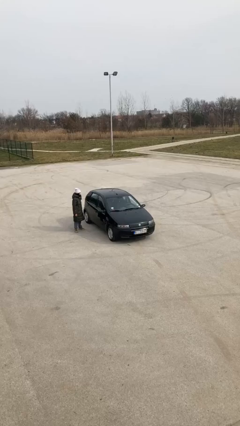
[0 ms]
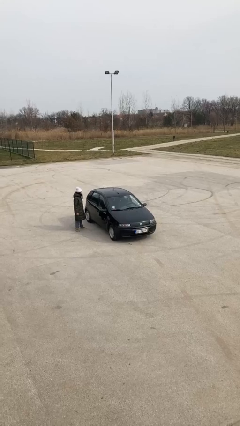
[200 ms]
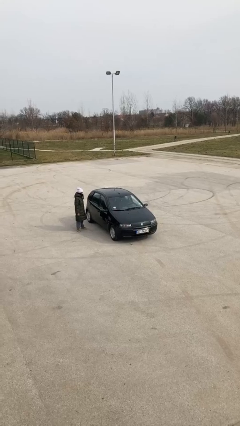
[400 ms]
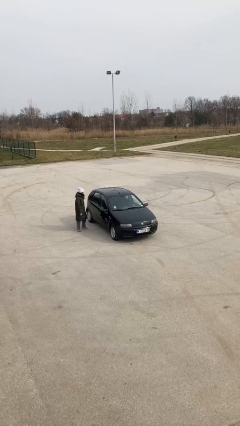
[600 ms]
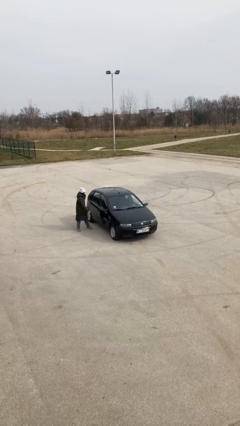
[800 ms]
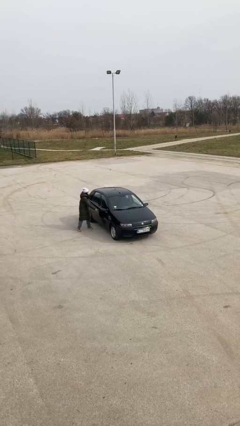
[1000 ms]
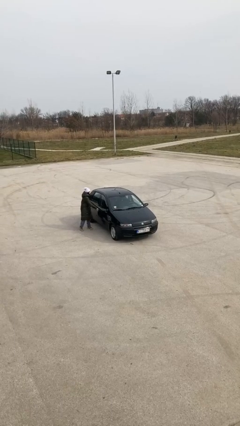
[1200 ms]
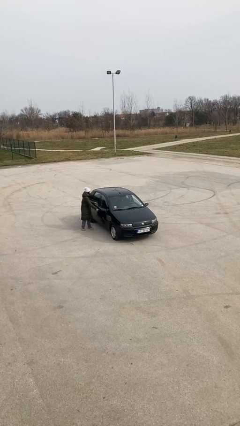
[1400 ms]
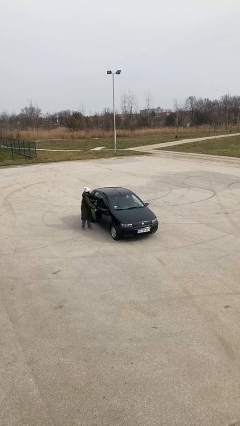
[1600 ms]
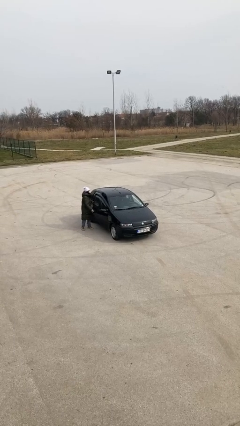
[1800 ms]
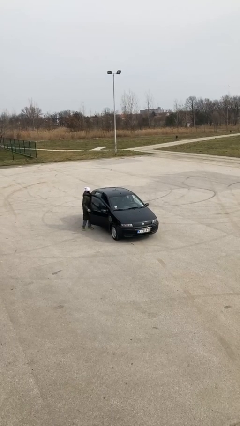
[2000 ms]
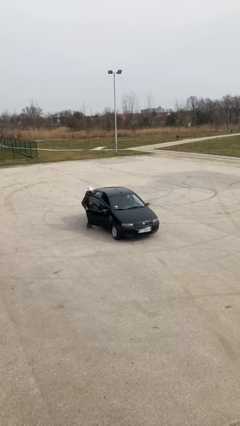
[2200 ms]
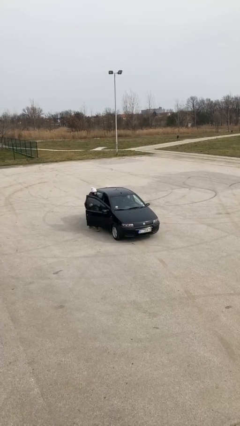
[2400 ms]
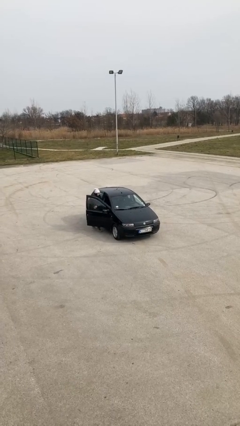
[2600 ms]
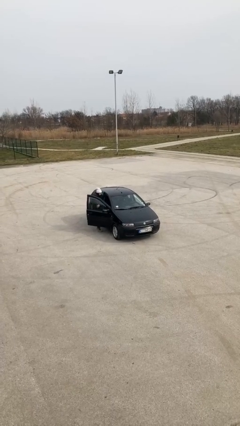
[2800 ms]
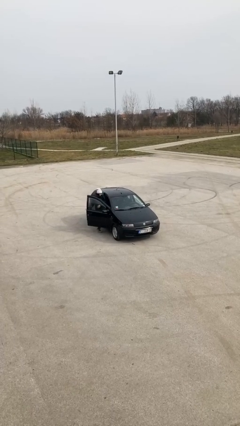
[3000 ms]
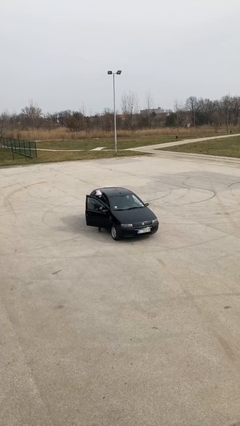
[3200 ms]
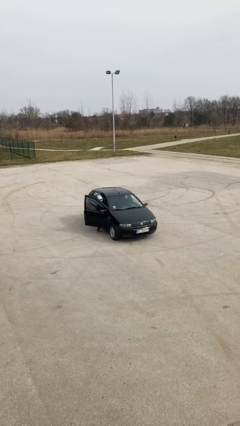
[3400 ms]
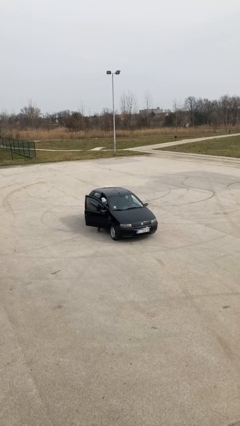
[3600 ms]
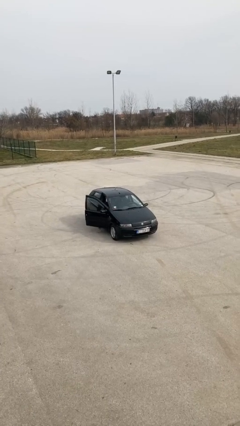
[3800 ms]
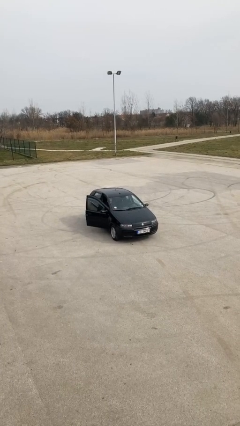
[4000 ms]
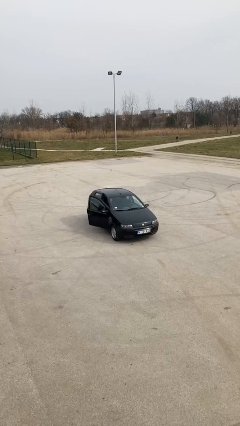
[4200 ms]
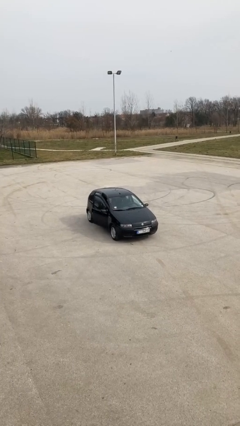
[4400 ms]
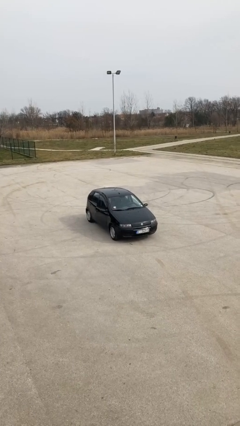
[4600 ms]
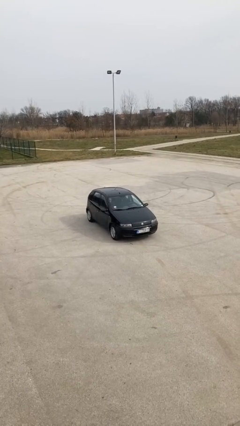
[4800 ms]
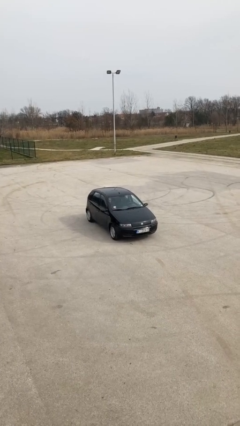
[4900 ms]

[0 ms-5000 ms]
car picks up person

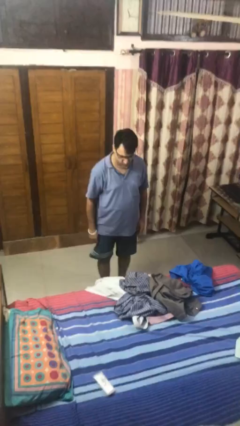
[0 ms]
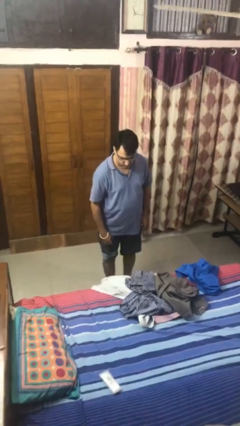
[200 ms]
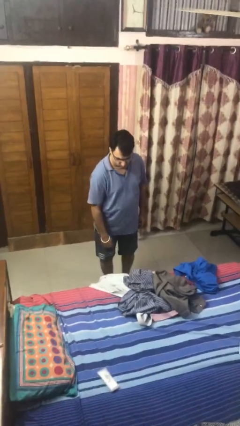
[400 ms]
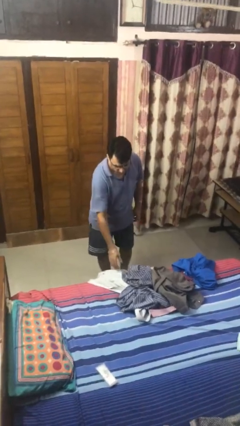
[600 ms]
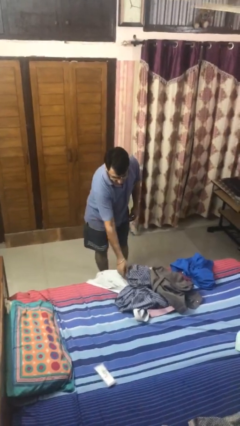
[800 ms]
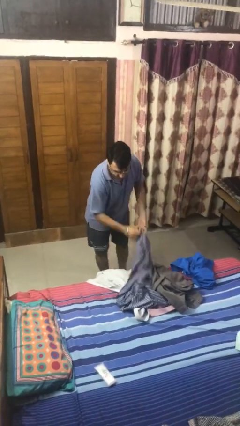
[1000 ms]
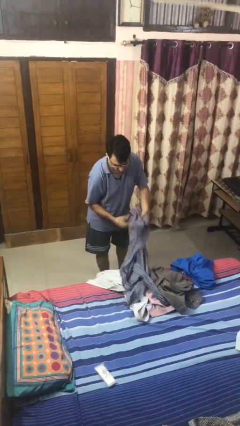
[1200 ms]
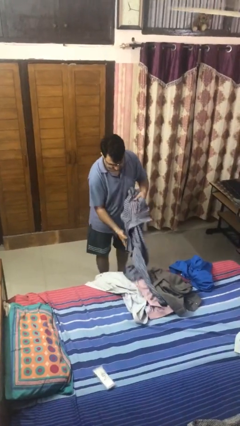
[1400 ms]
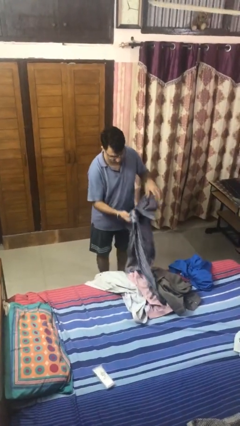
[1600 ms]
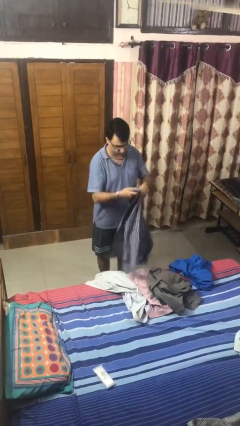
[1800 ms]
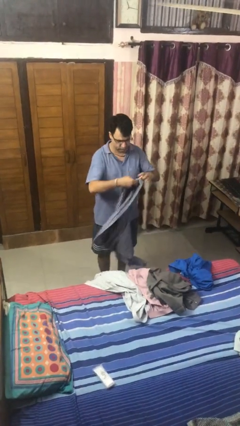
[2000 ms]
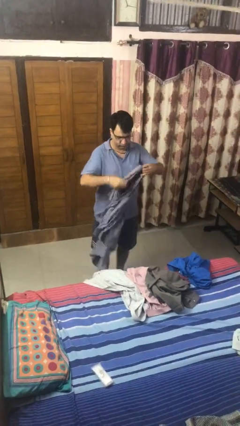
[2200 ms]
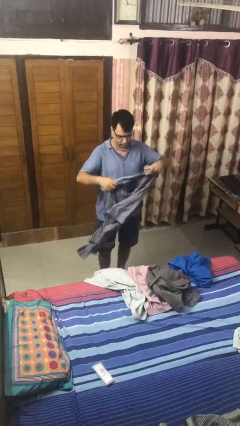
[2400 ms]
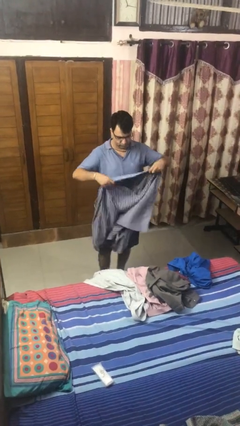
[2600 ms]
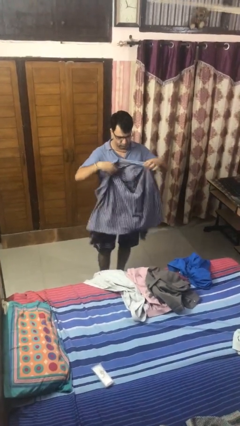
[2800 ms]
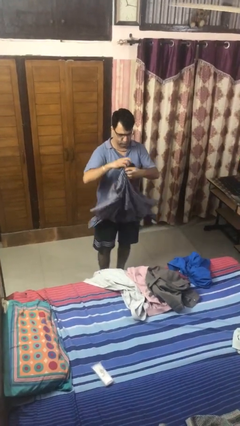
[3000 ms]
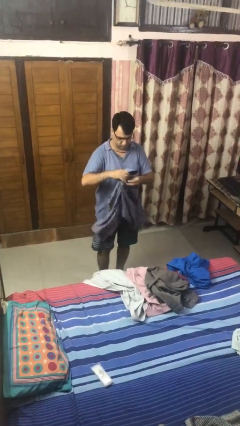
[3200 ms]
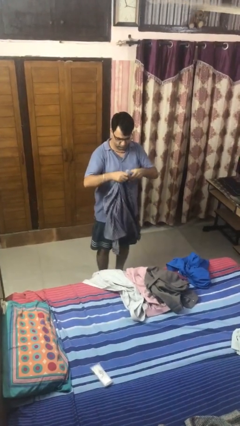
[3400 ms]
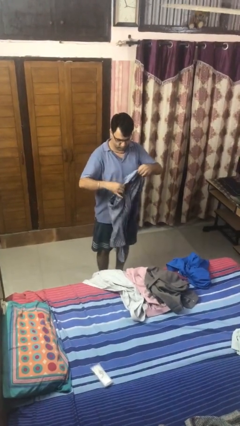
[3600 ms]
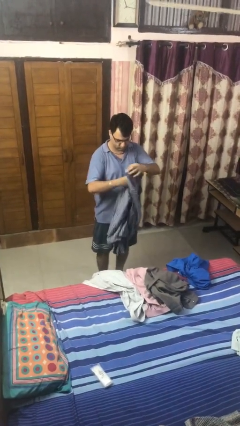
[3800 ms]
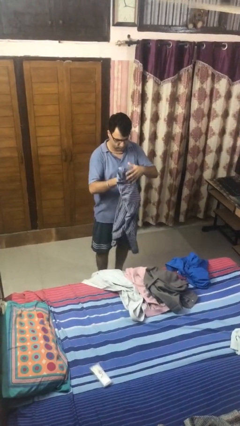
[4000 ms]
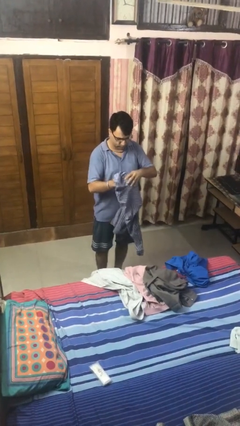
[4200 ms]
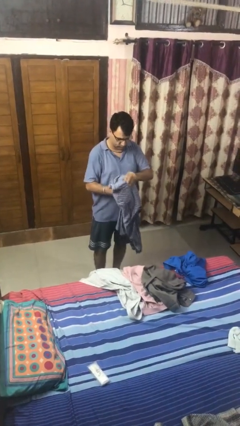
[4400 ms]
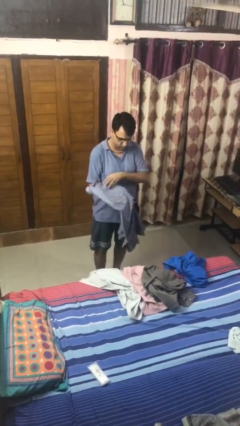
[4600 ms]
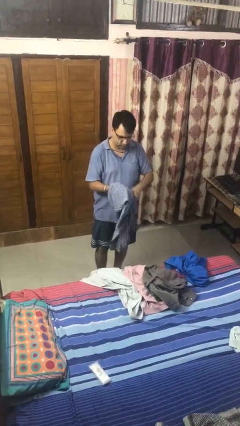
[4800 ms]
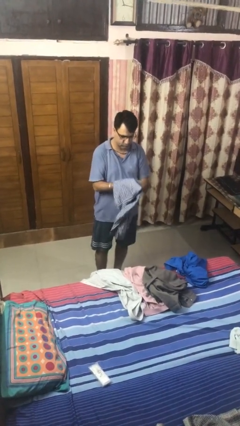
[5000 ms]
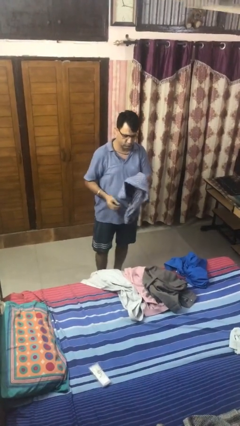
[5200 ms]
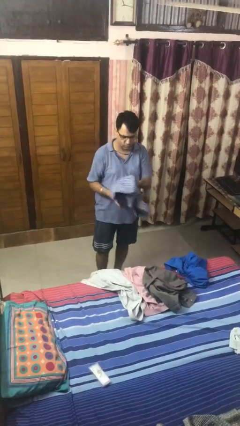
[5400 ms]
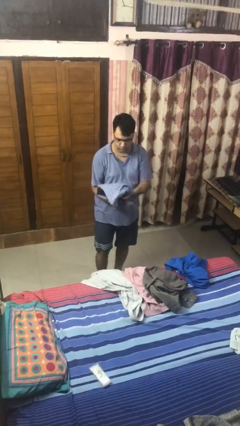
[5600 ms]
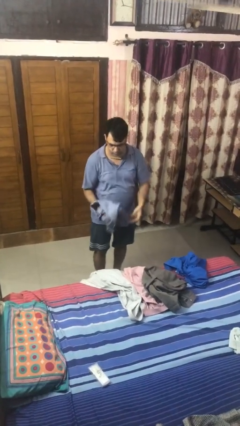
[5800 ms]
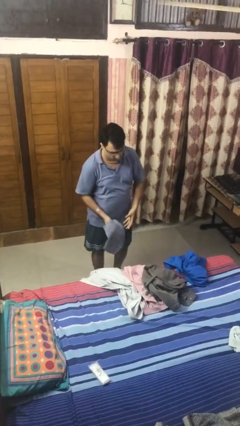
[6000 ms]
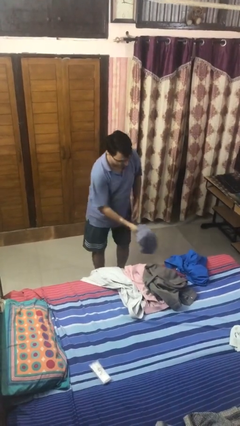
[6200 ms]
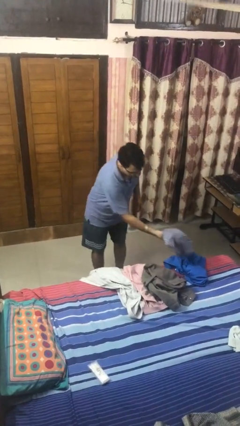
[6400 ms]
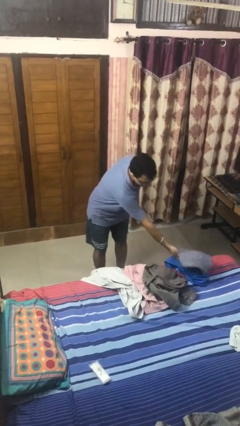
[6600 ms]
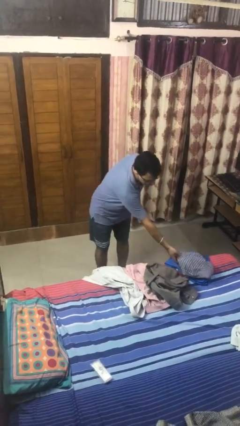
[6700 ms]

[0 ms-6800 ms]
person folds shirt

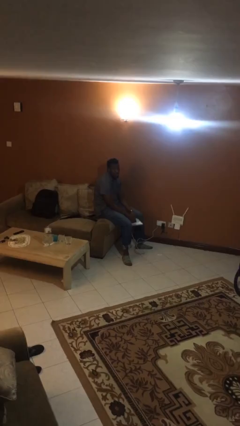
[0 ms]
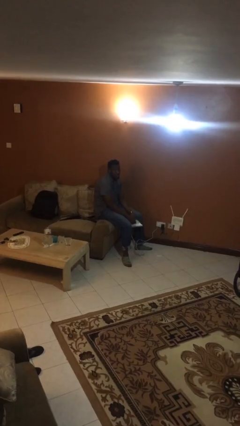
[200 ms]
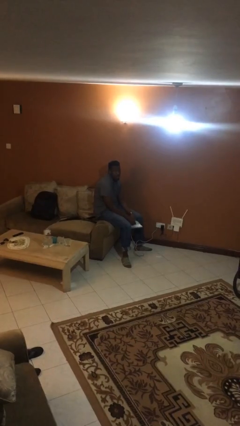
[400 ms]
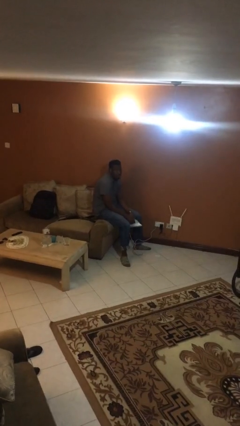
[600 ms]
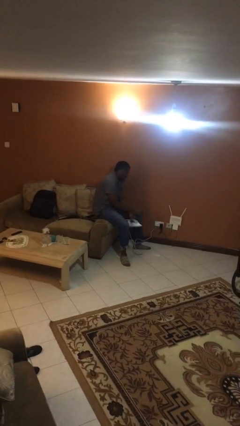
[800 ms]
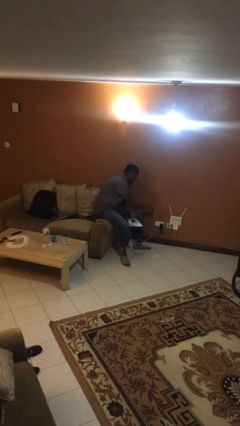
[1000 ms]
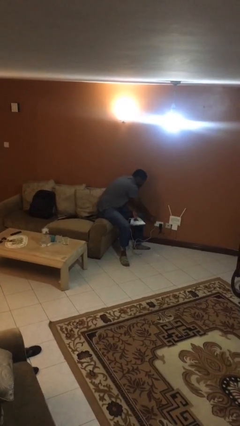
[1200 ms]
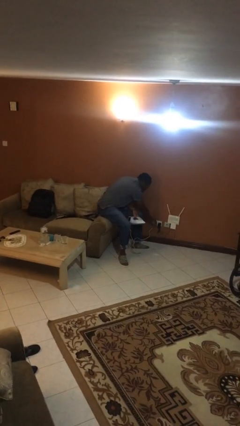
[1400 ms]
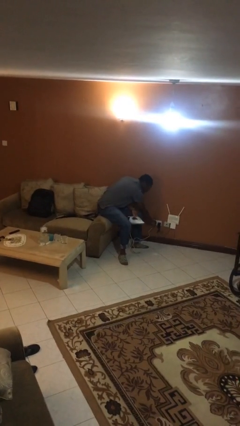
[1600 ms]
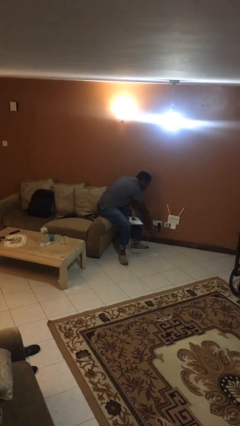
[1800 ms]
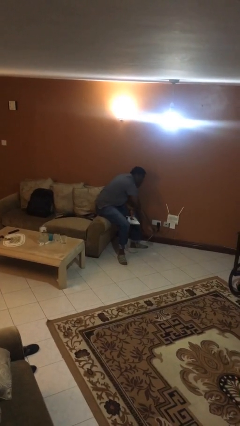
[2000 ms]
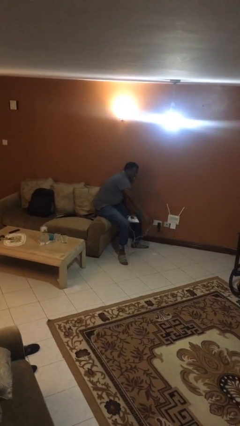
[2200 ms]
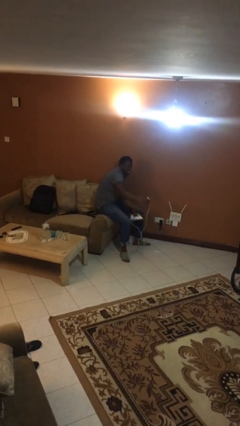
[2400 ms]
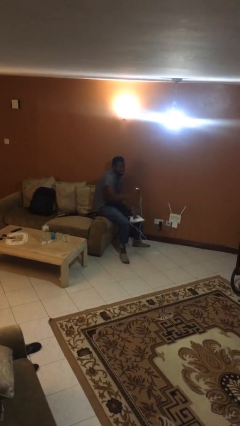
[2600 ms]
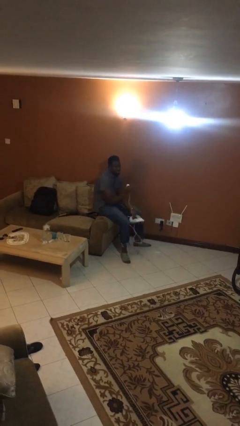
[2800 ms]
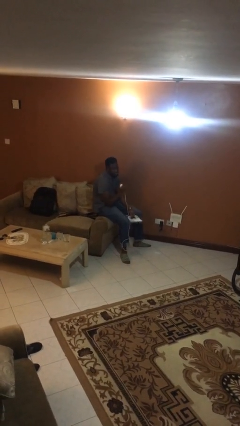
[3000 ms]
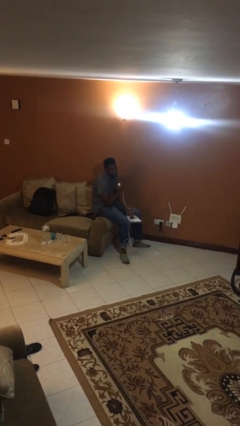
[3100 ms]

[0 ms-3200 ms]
person unplugs from electrical socket

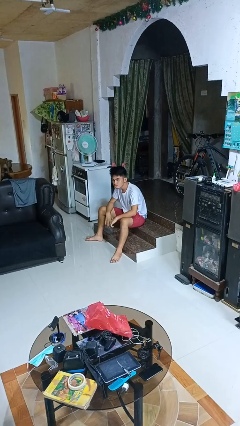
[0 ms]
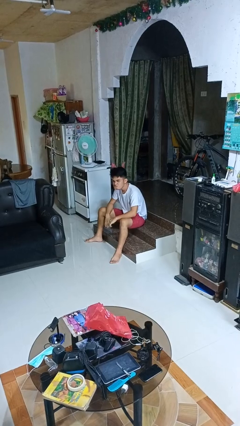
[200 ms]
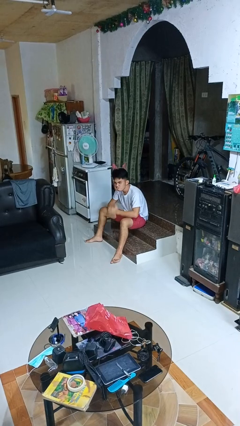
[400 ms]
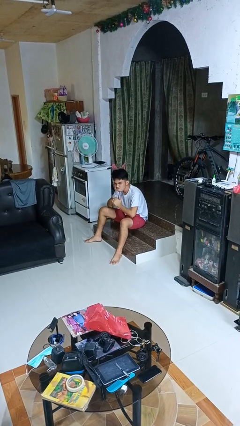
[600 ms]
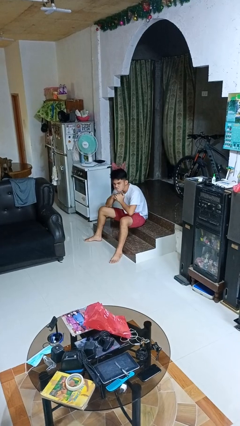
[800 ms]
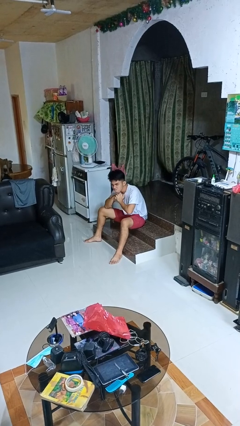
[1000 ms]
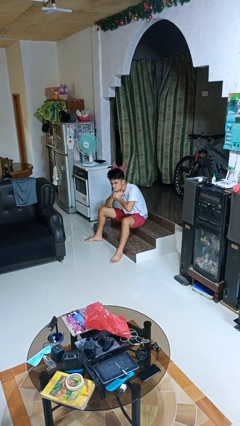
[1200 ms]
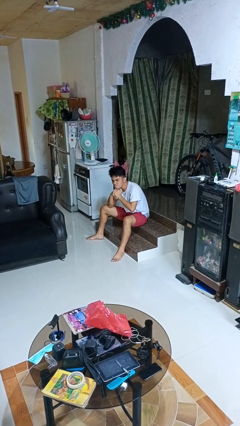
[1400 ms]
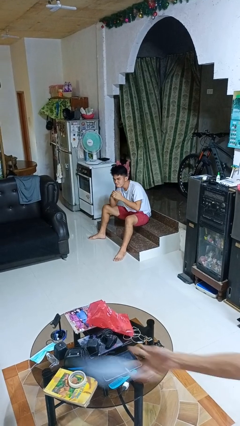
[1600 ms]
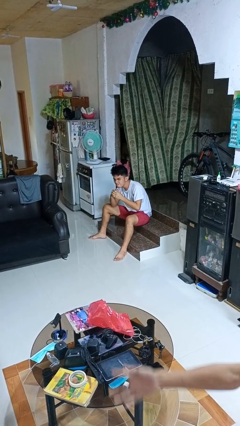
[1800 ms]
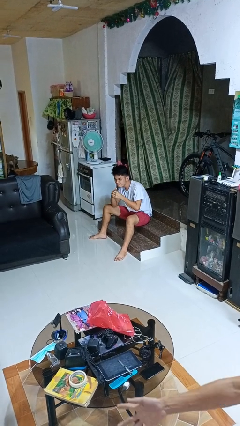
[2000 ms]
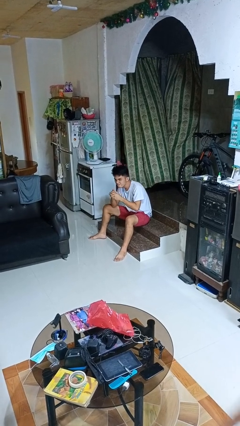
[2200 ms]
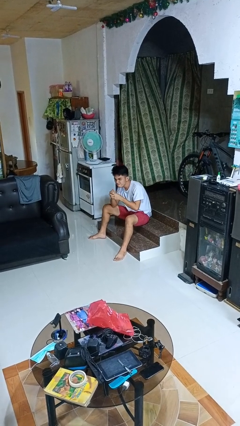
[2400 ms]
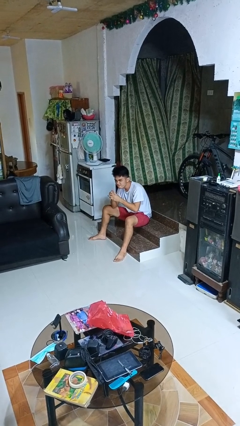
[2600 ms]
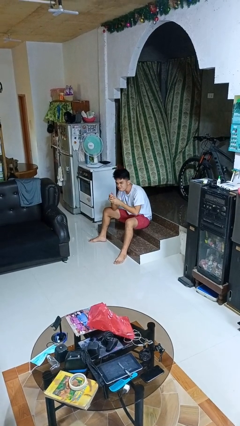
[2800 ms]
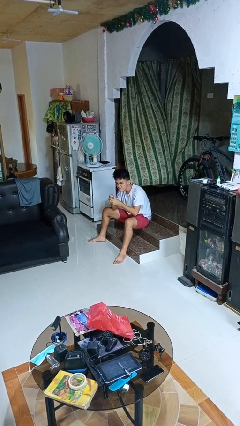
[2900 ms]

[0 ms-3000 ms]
person cracks knuckles
